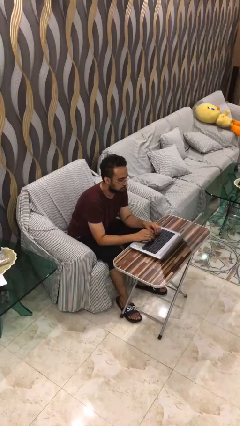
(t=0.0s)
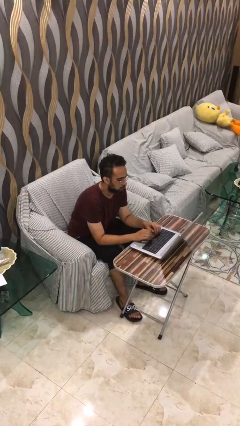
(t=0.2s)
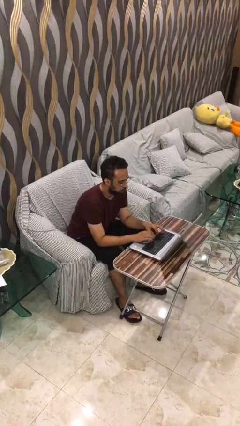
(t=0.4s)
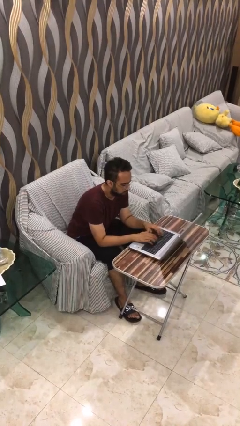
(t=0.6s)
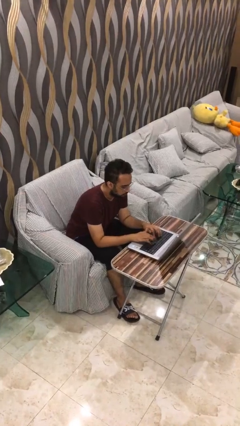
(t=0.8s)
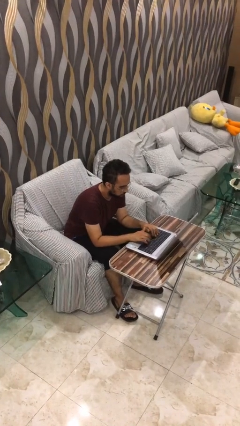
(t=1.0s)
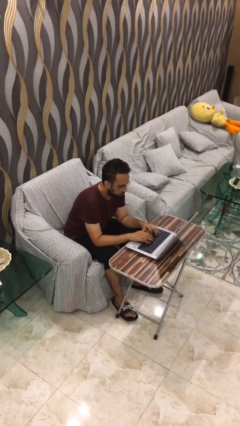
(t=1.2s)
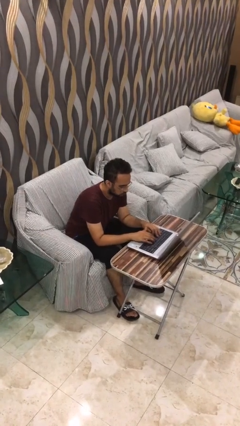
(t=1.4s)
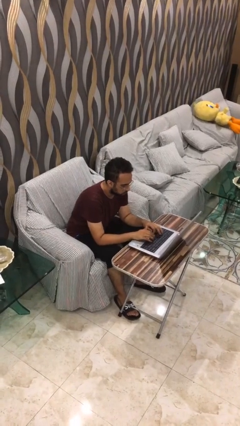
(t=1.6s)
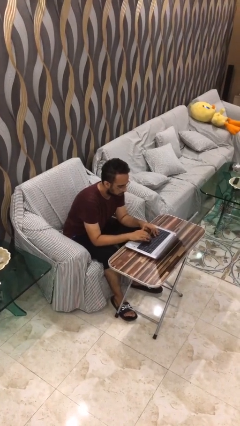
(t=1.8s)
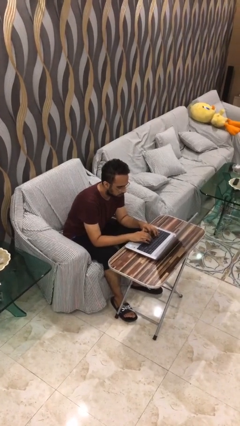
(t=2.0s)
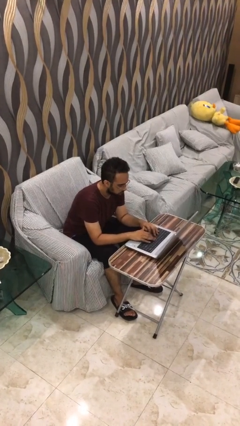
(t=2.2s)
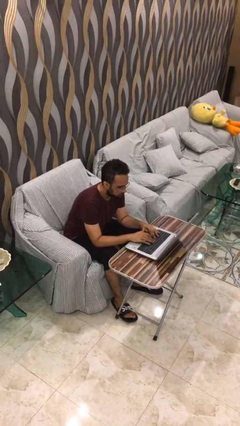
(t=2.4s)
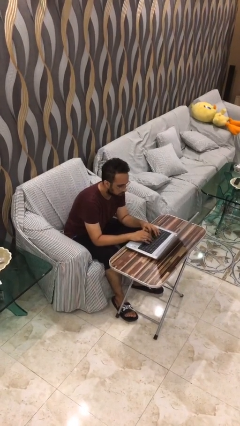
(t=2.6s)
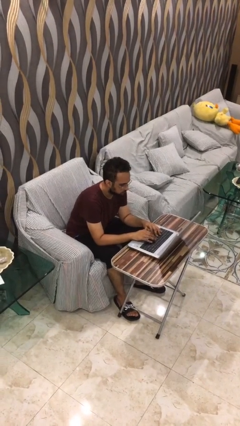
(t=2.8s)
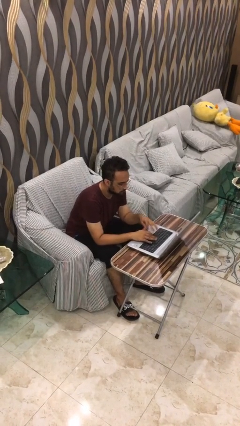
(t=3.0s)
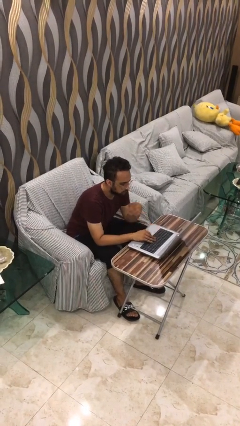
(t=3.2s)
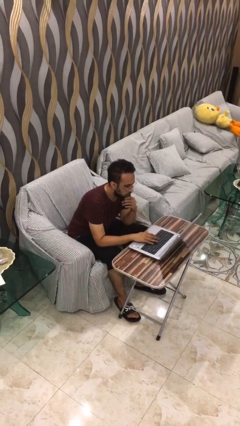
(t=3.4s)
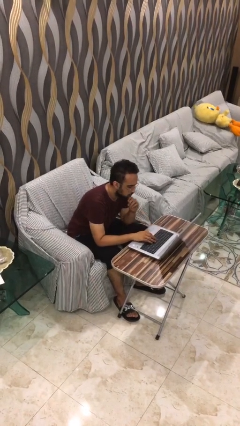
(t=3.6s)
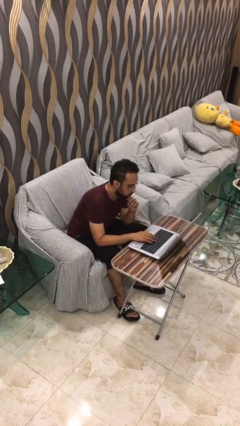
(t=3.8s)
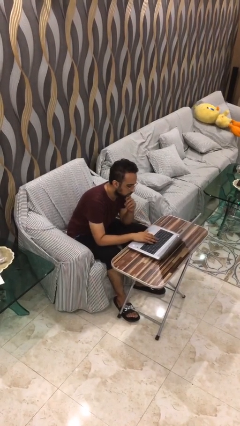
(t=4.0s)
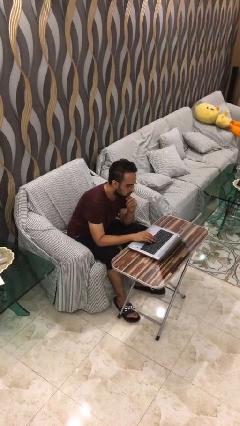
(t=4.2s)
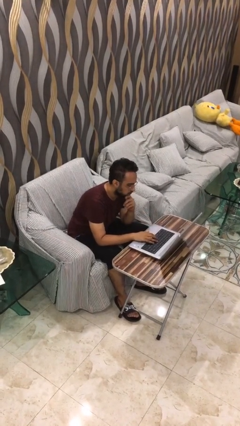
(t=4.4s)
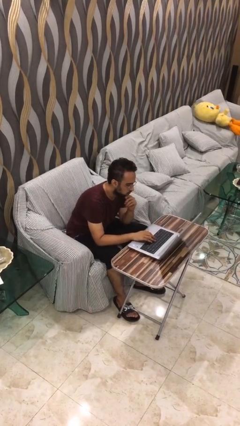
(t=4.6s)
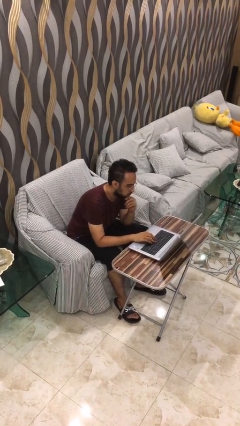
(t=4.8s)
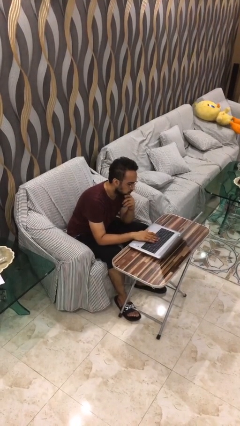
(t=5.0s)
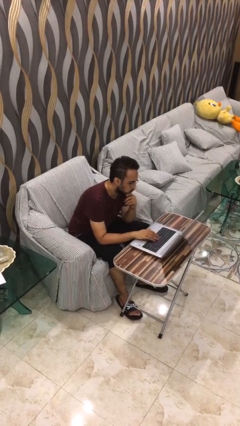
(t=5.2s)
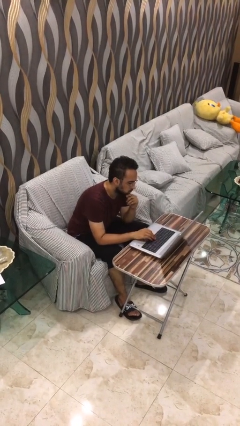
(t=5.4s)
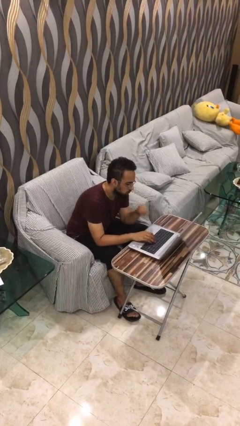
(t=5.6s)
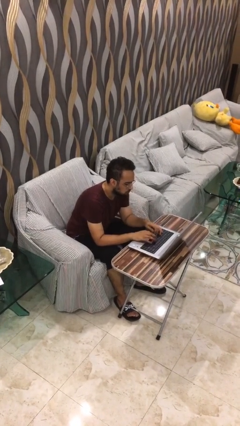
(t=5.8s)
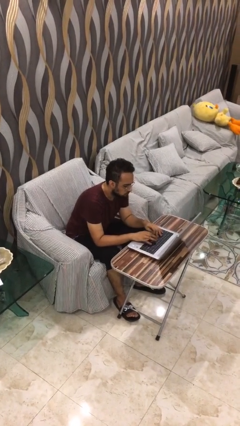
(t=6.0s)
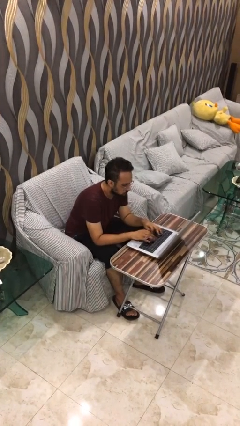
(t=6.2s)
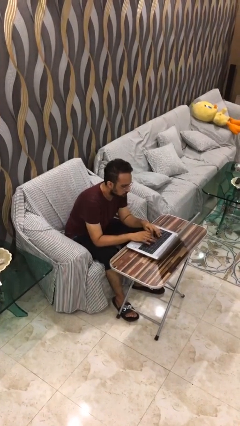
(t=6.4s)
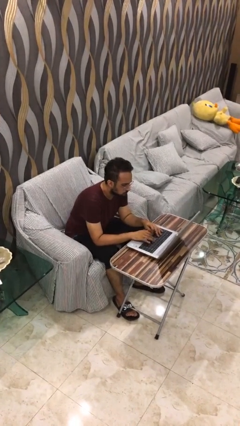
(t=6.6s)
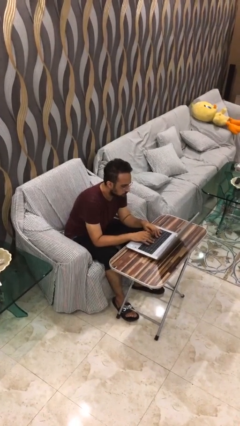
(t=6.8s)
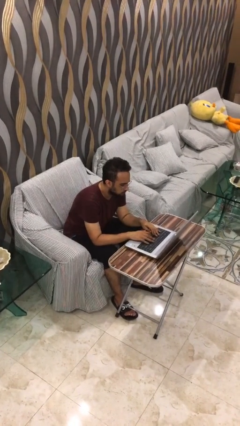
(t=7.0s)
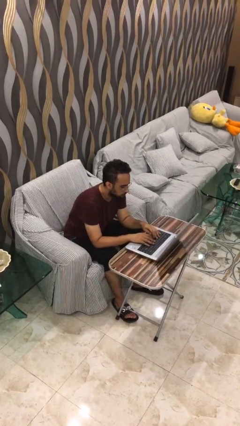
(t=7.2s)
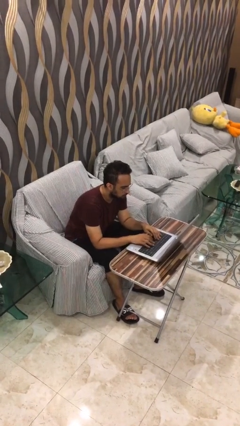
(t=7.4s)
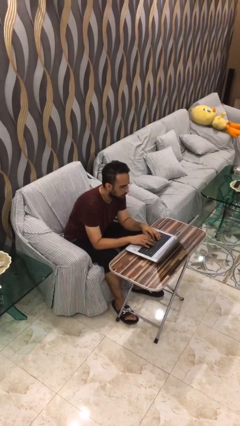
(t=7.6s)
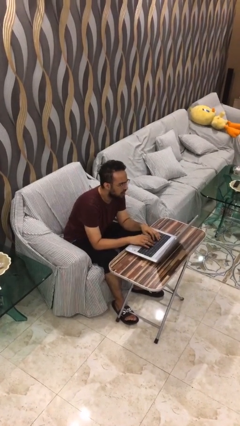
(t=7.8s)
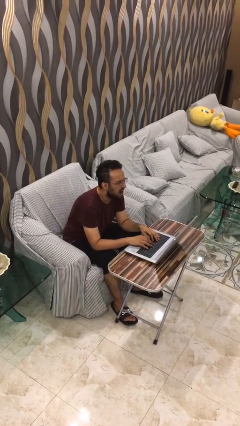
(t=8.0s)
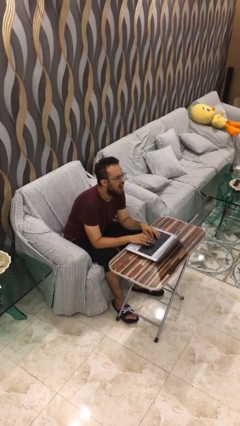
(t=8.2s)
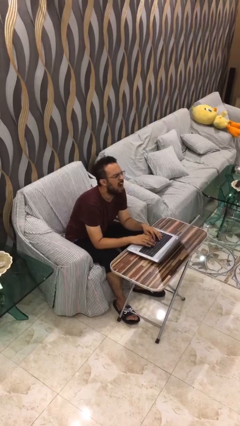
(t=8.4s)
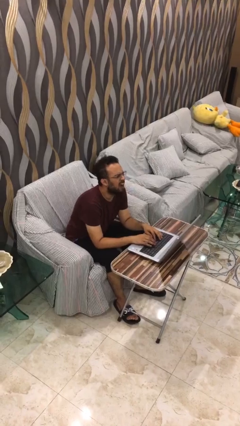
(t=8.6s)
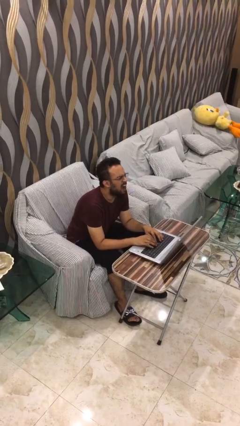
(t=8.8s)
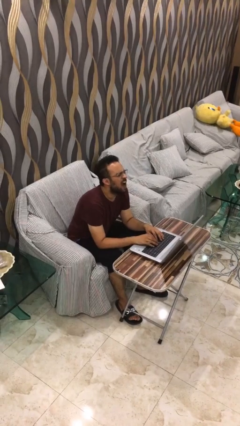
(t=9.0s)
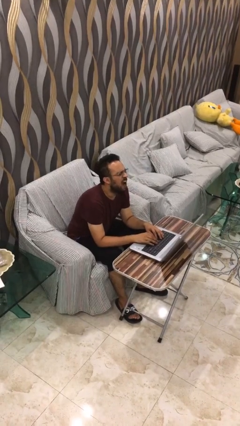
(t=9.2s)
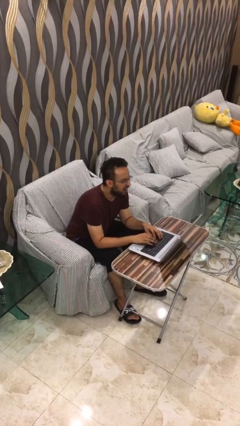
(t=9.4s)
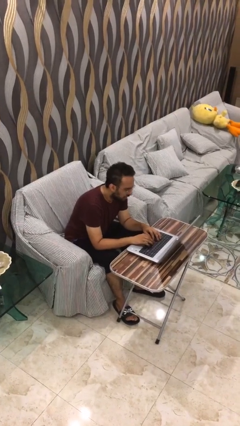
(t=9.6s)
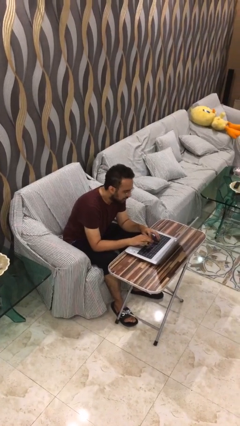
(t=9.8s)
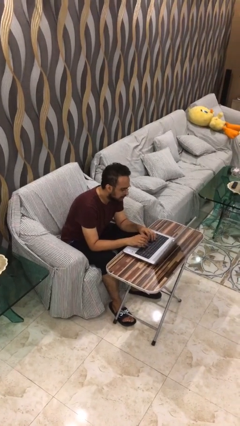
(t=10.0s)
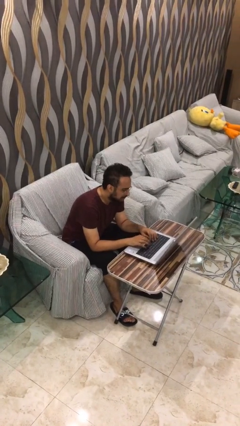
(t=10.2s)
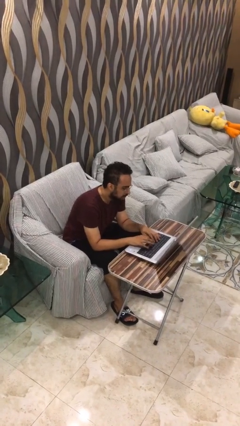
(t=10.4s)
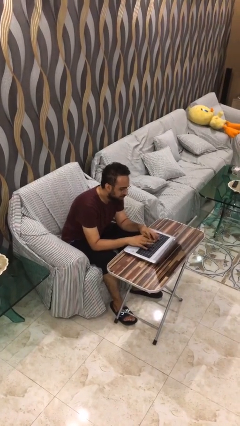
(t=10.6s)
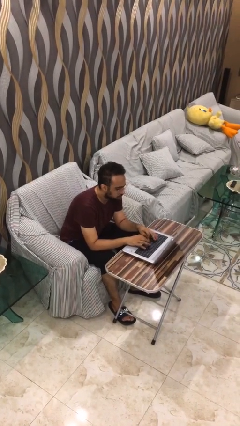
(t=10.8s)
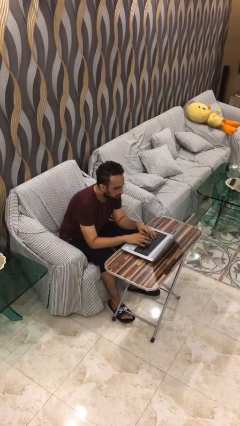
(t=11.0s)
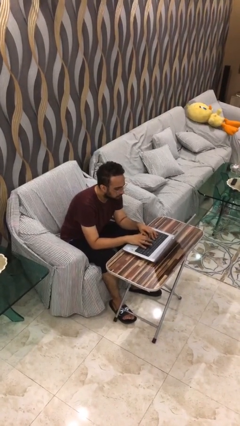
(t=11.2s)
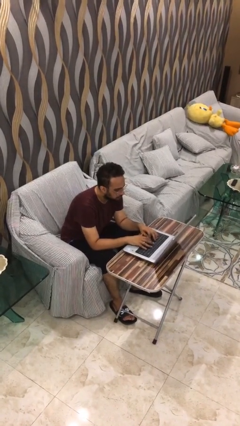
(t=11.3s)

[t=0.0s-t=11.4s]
person interacts with laptop

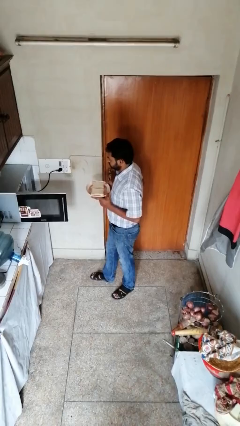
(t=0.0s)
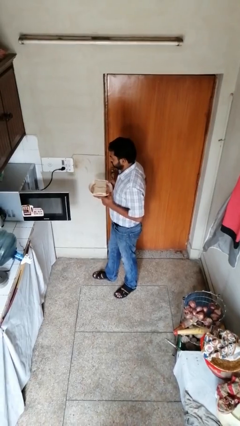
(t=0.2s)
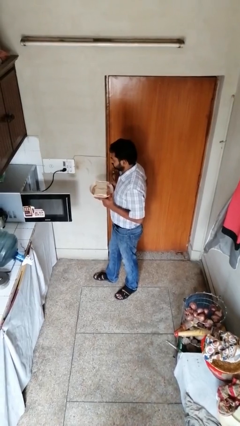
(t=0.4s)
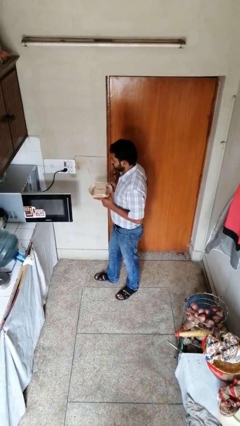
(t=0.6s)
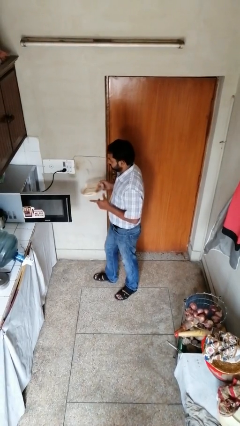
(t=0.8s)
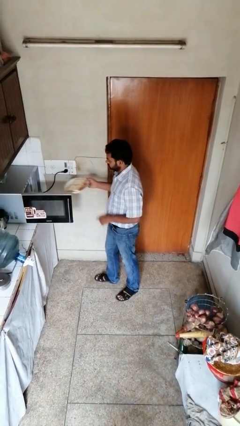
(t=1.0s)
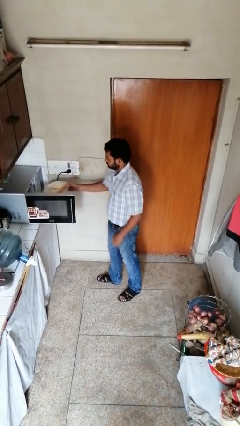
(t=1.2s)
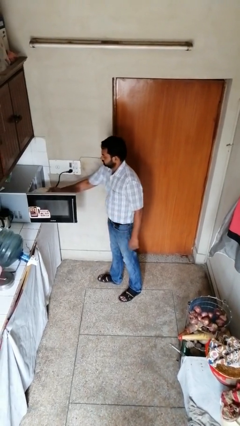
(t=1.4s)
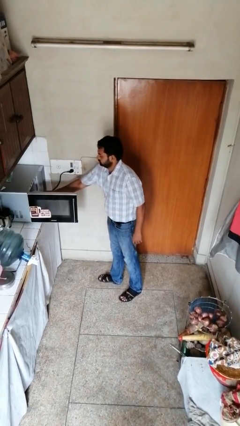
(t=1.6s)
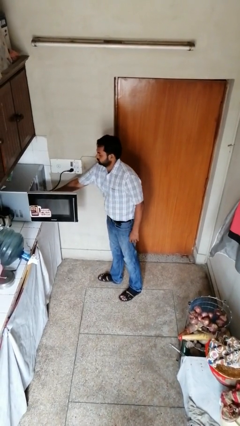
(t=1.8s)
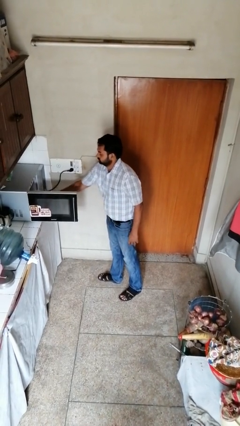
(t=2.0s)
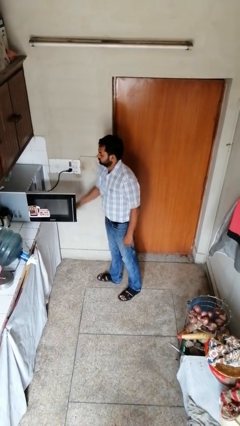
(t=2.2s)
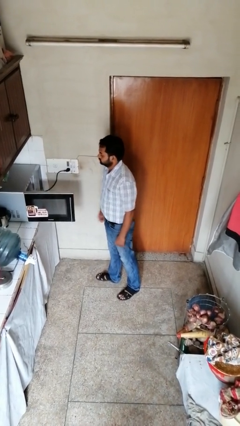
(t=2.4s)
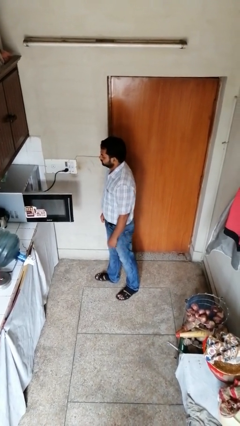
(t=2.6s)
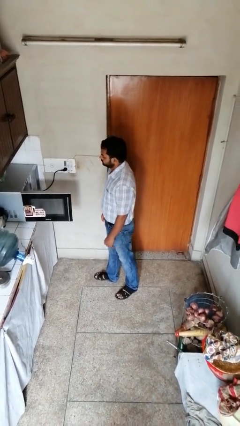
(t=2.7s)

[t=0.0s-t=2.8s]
person puts object into oven

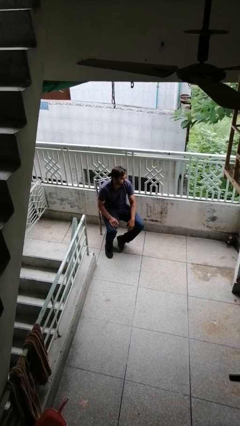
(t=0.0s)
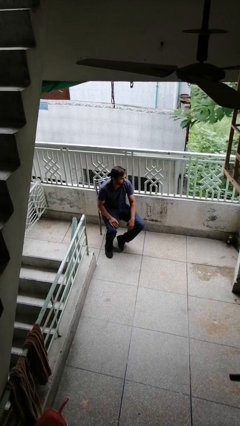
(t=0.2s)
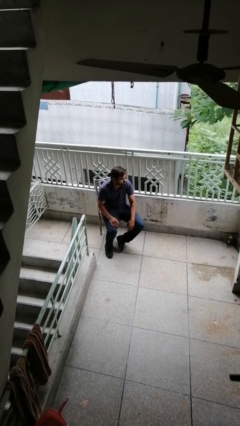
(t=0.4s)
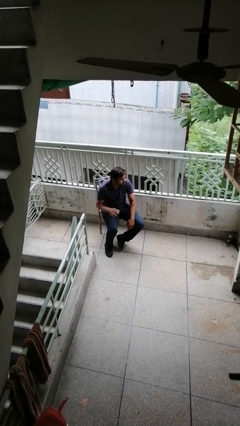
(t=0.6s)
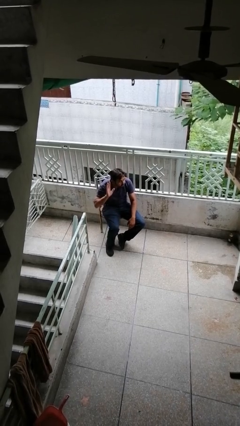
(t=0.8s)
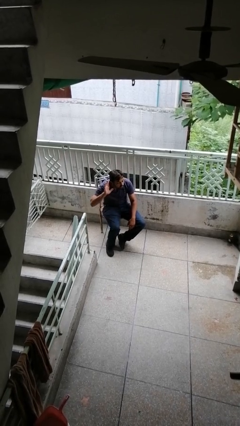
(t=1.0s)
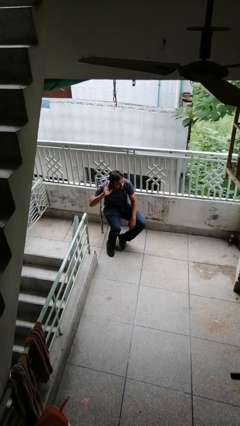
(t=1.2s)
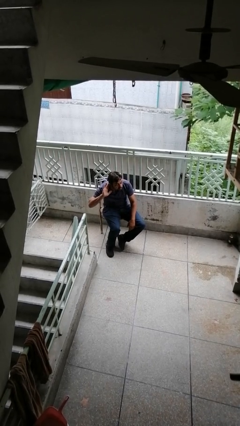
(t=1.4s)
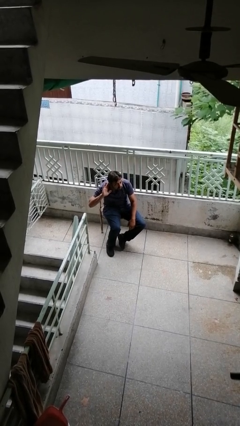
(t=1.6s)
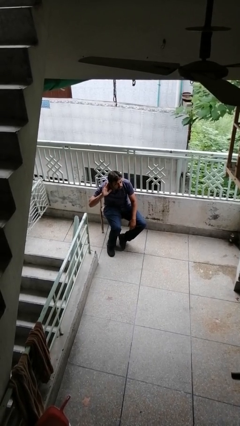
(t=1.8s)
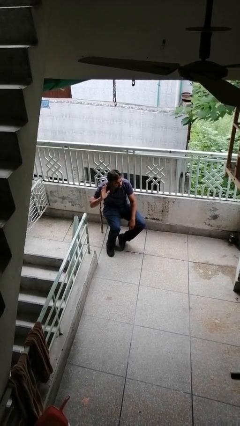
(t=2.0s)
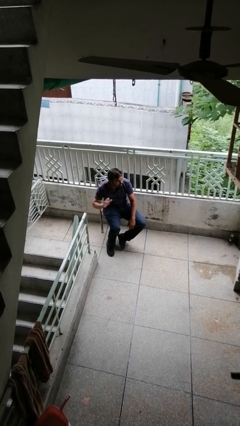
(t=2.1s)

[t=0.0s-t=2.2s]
person gestures listen closely

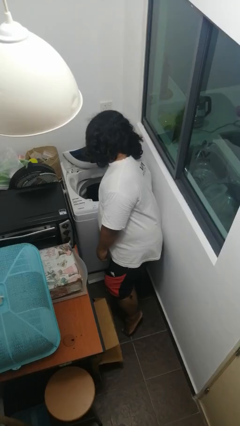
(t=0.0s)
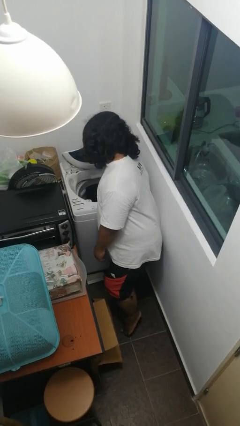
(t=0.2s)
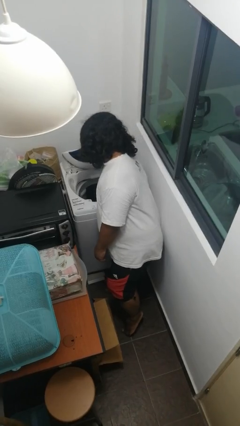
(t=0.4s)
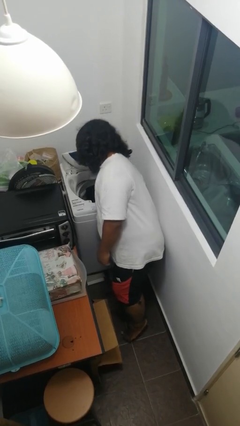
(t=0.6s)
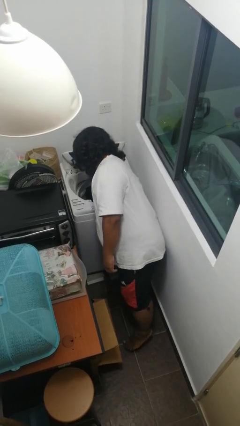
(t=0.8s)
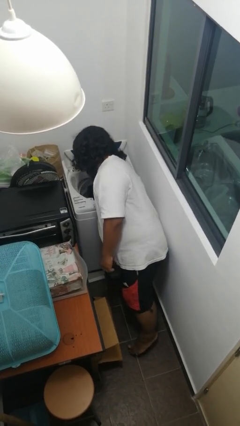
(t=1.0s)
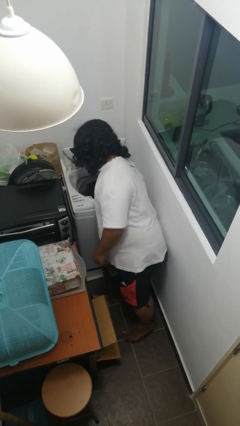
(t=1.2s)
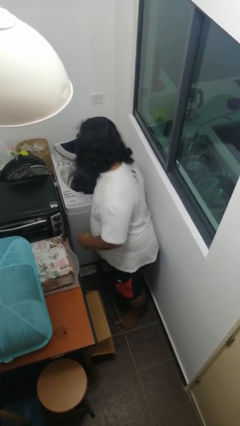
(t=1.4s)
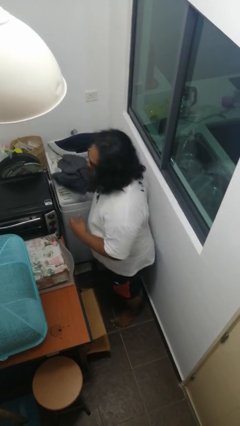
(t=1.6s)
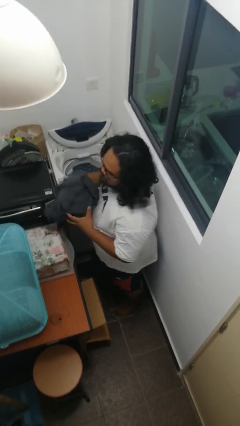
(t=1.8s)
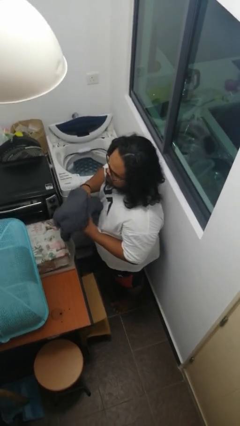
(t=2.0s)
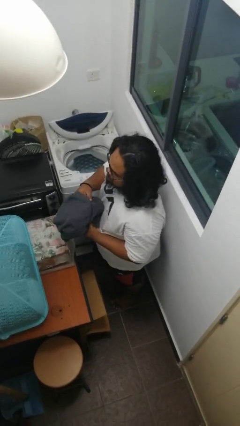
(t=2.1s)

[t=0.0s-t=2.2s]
person unloads clotheswasher
